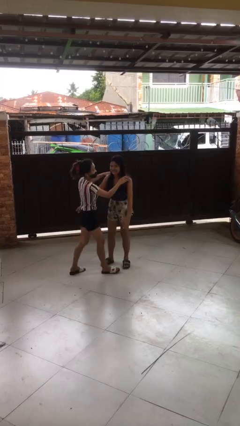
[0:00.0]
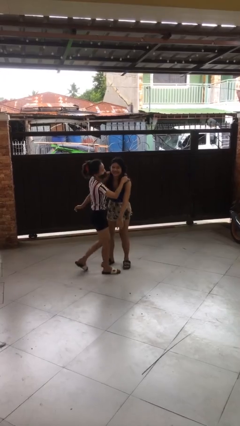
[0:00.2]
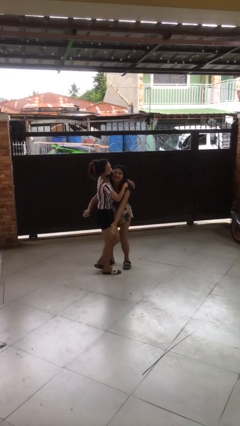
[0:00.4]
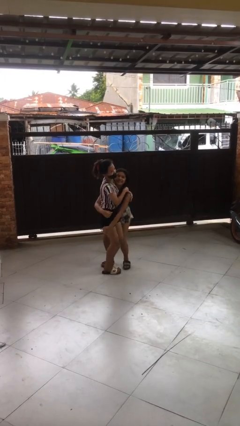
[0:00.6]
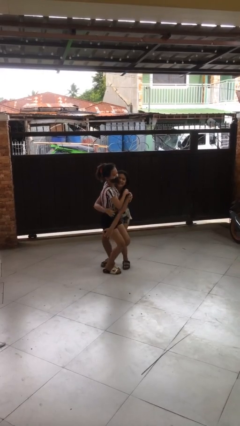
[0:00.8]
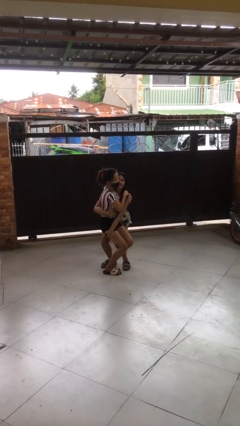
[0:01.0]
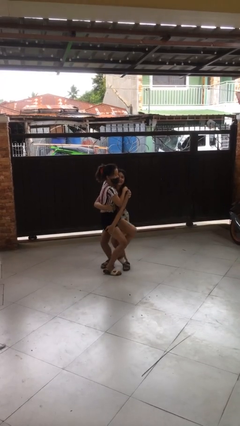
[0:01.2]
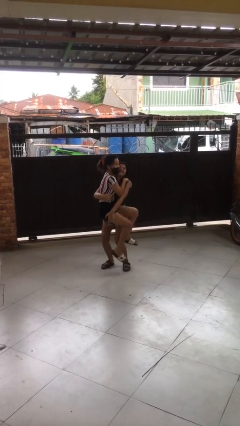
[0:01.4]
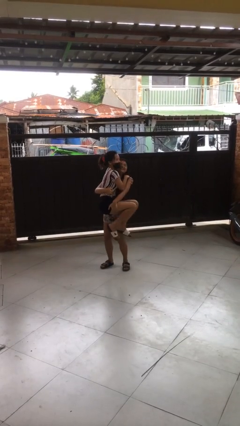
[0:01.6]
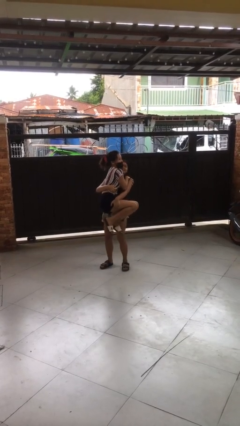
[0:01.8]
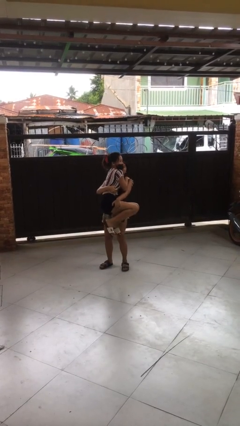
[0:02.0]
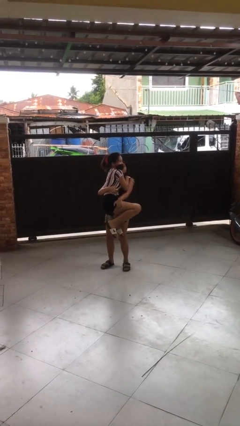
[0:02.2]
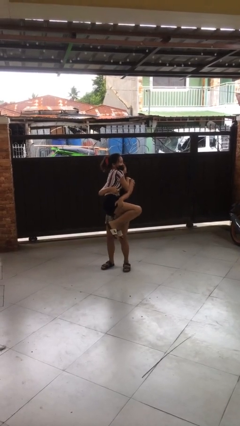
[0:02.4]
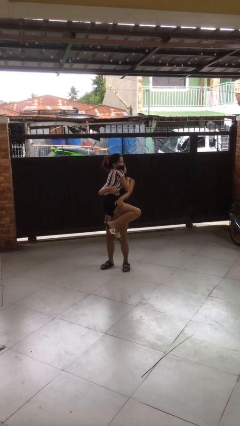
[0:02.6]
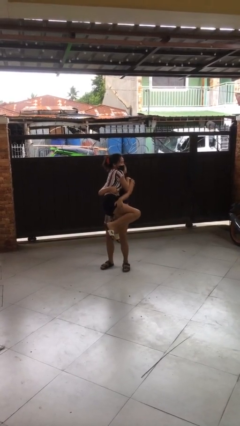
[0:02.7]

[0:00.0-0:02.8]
person picks up person

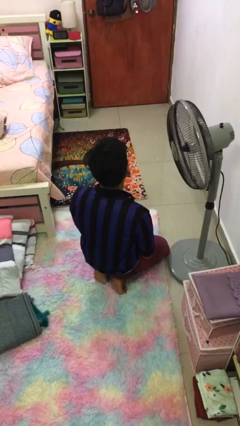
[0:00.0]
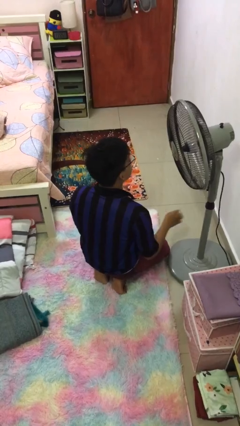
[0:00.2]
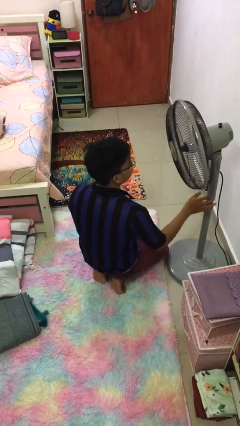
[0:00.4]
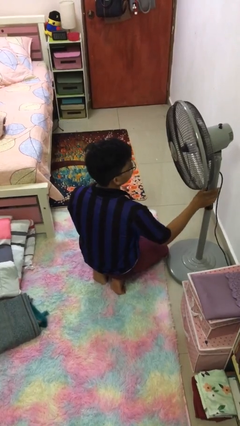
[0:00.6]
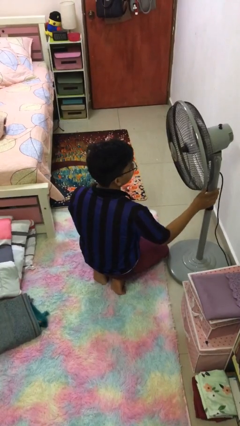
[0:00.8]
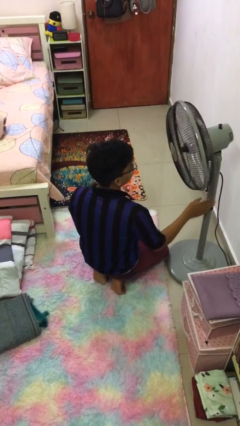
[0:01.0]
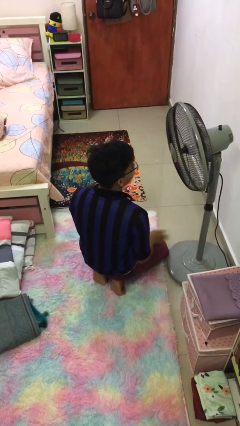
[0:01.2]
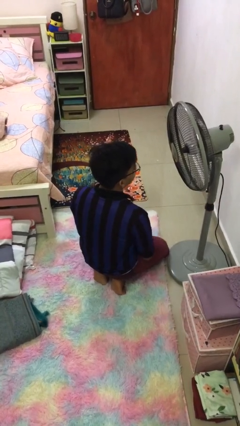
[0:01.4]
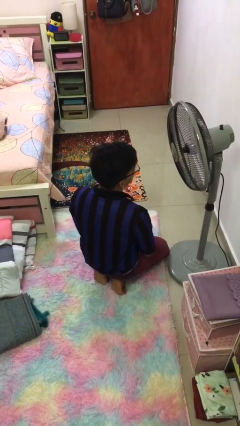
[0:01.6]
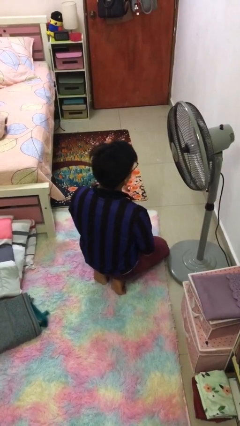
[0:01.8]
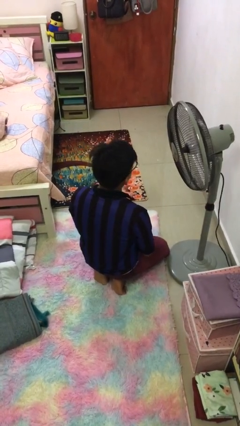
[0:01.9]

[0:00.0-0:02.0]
person turns on fan

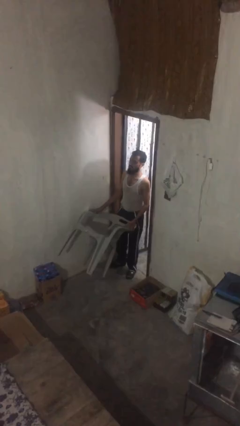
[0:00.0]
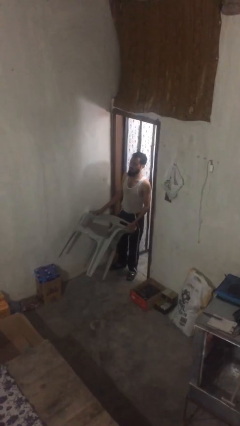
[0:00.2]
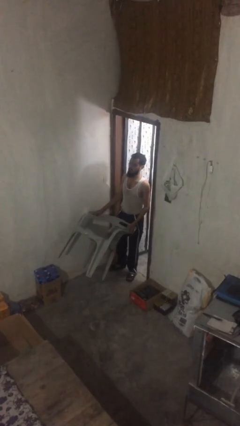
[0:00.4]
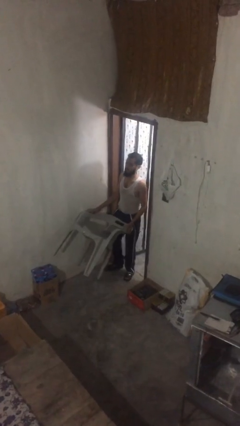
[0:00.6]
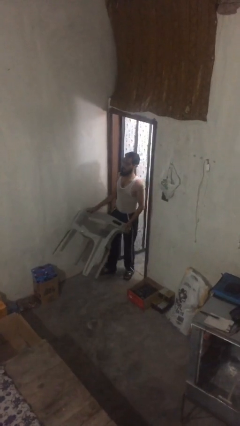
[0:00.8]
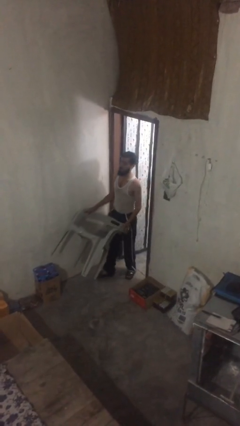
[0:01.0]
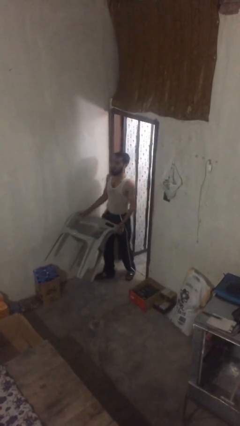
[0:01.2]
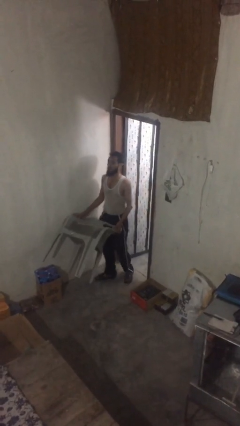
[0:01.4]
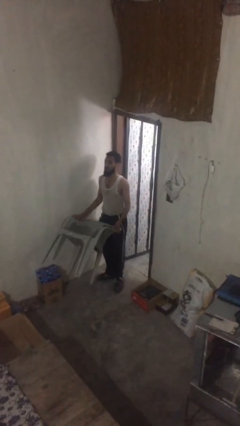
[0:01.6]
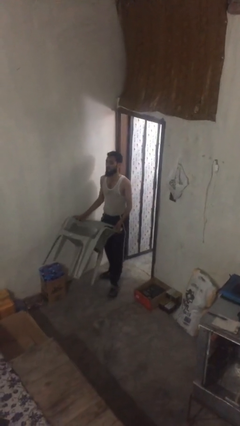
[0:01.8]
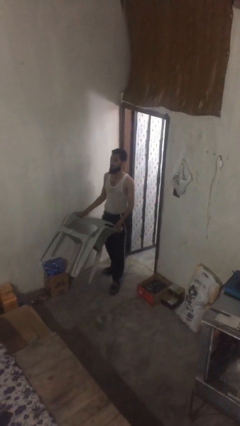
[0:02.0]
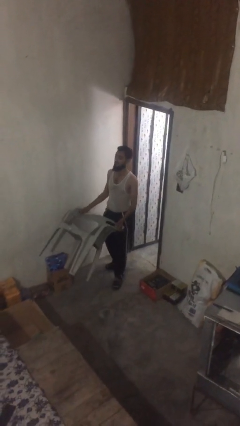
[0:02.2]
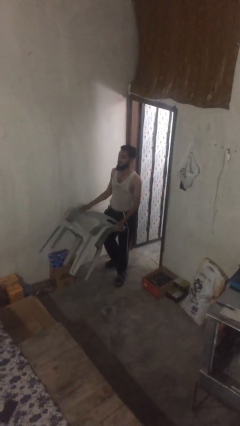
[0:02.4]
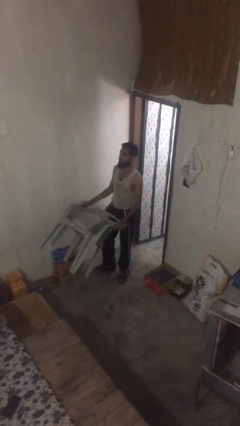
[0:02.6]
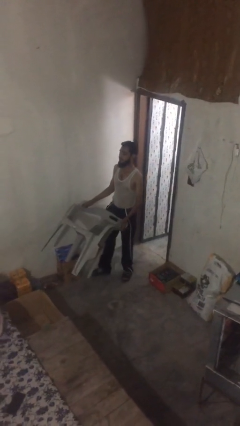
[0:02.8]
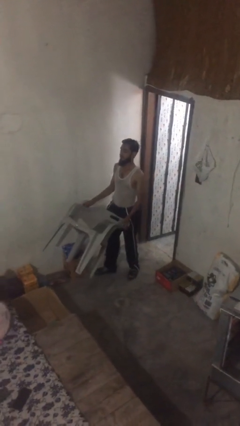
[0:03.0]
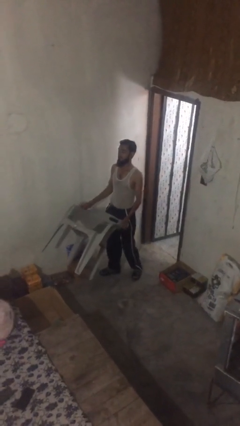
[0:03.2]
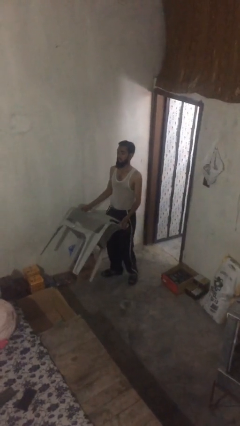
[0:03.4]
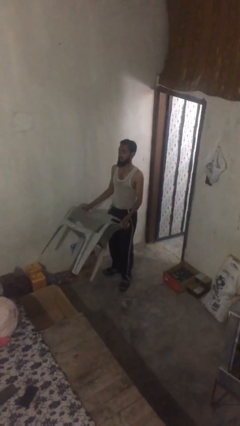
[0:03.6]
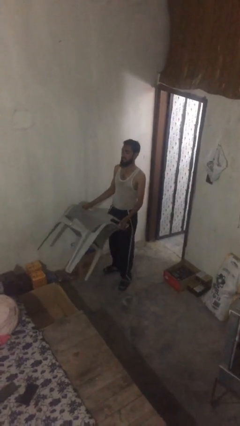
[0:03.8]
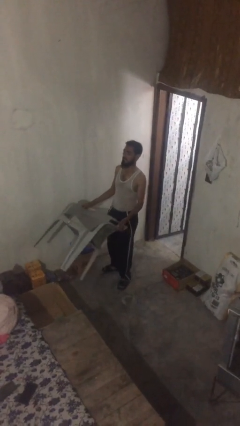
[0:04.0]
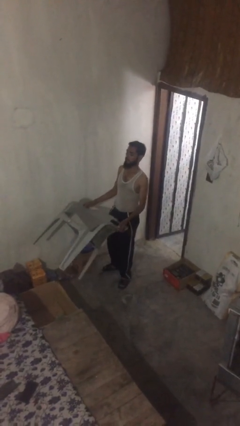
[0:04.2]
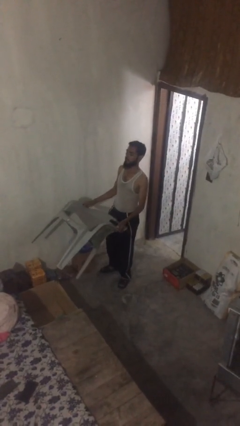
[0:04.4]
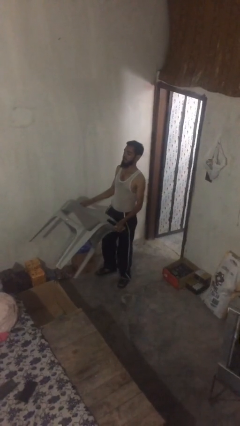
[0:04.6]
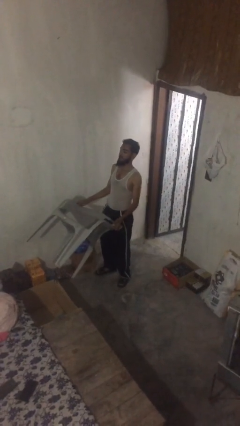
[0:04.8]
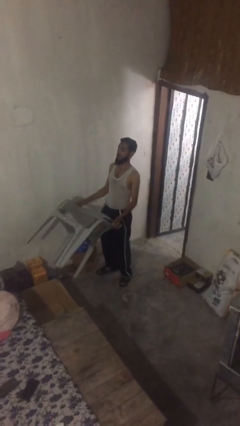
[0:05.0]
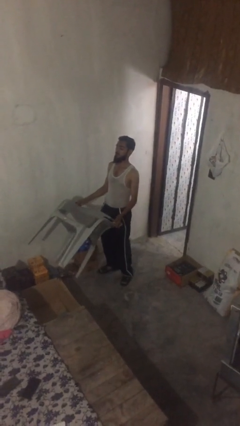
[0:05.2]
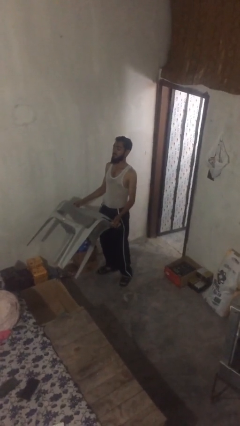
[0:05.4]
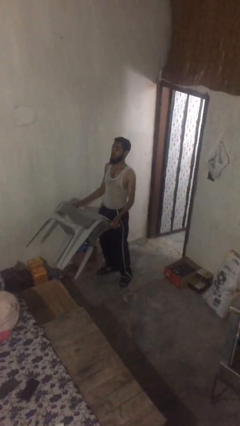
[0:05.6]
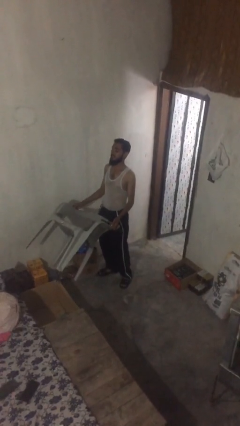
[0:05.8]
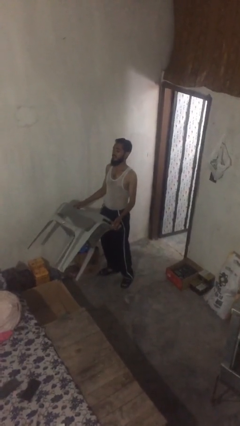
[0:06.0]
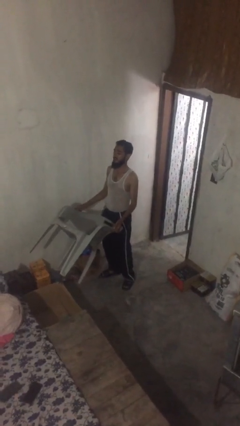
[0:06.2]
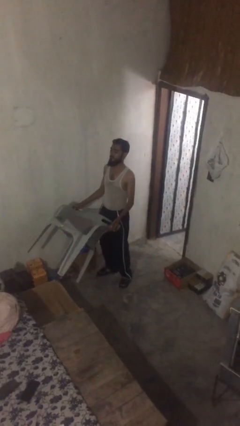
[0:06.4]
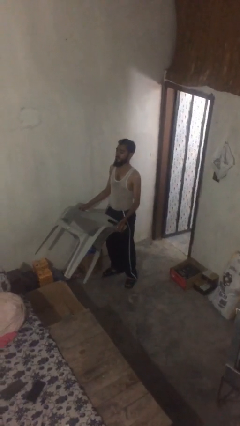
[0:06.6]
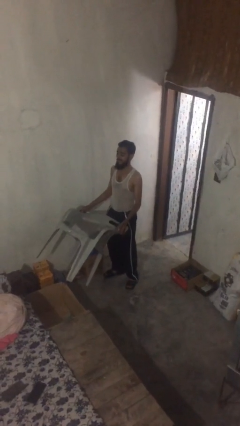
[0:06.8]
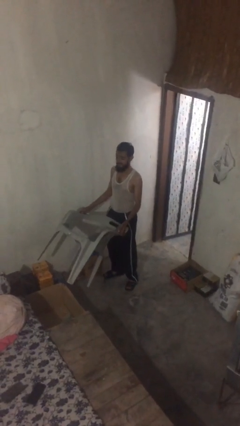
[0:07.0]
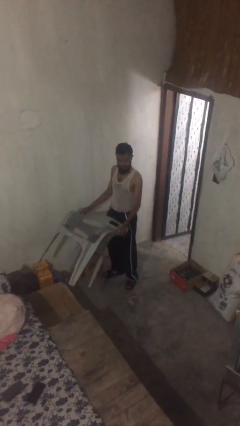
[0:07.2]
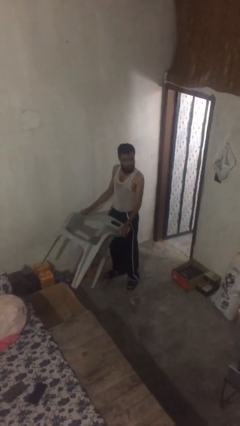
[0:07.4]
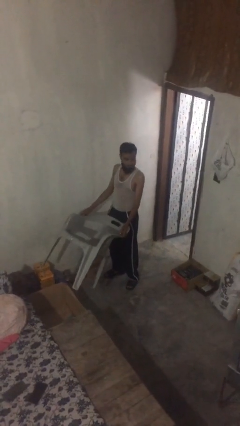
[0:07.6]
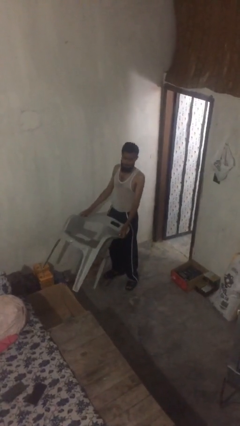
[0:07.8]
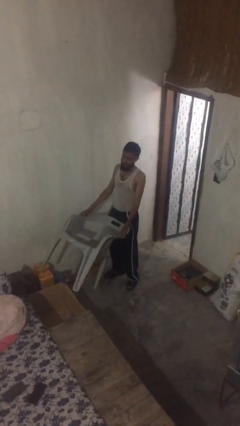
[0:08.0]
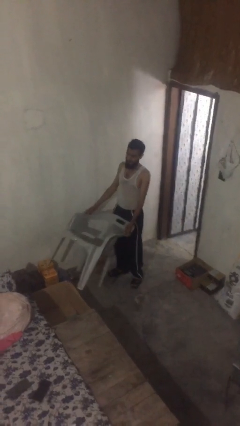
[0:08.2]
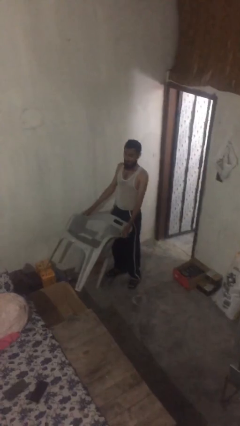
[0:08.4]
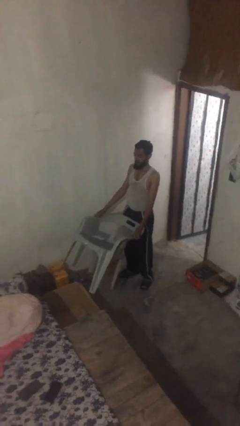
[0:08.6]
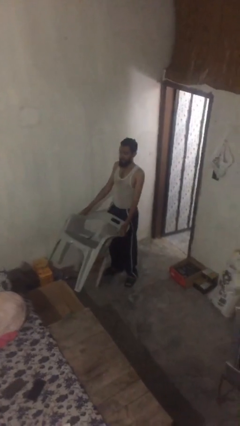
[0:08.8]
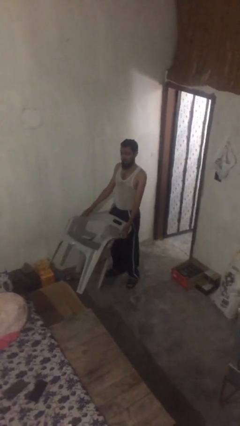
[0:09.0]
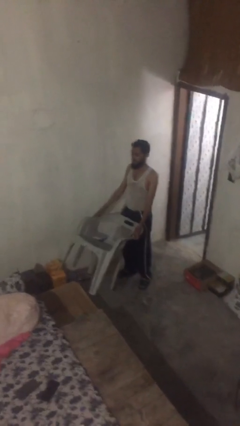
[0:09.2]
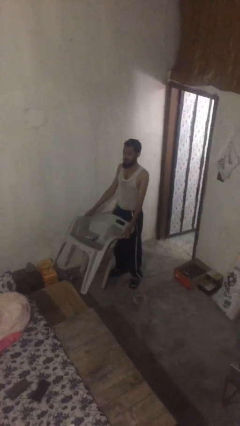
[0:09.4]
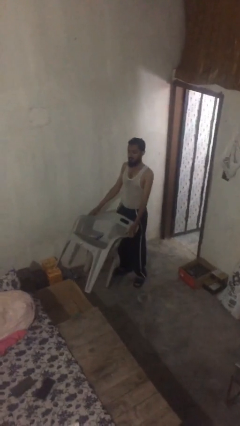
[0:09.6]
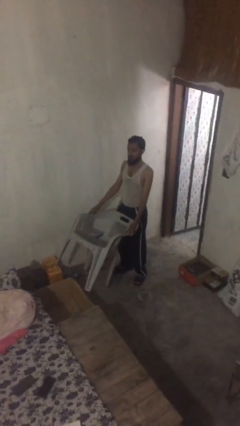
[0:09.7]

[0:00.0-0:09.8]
person carries heavy object

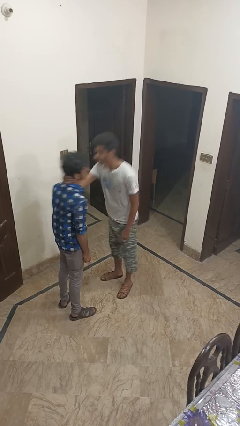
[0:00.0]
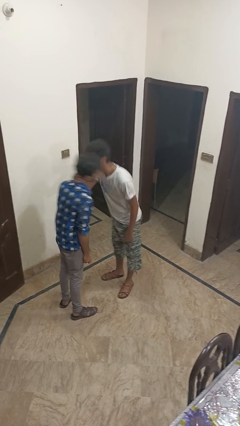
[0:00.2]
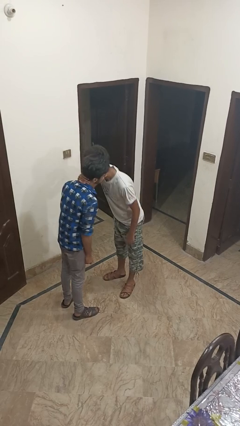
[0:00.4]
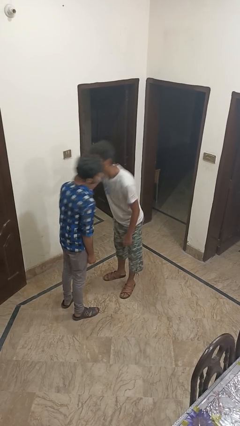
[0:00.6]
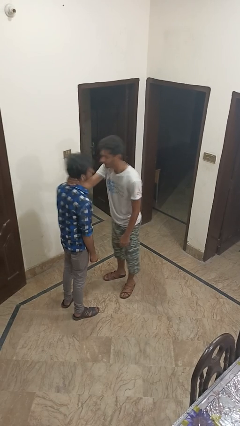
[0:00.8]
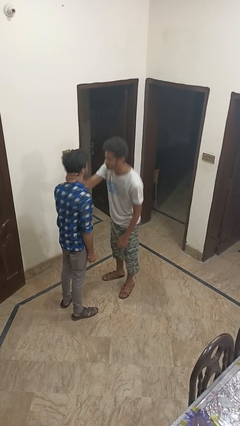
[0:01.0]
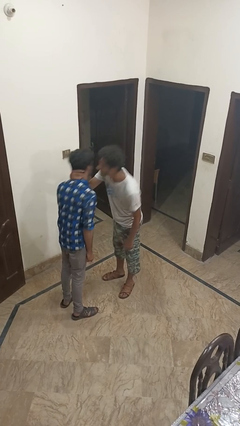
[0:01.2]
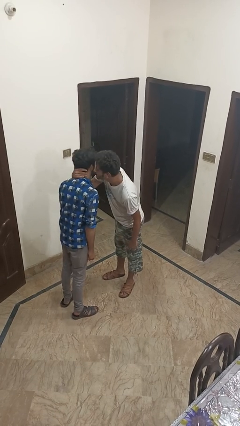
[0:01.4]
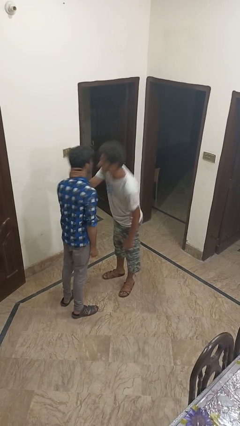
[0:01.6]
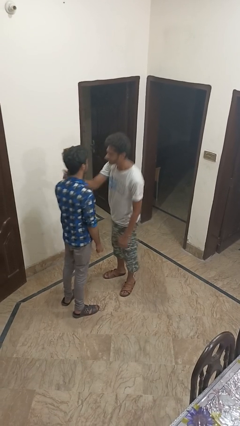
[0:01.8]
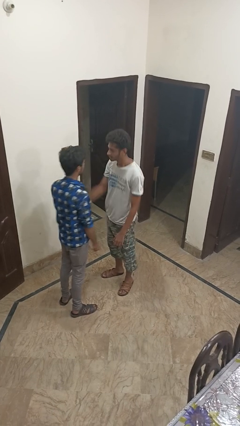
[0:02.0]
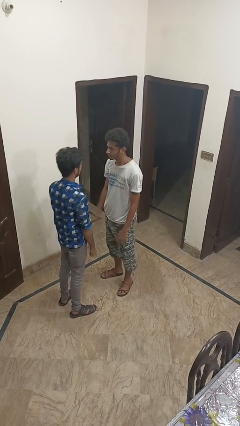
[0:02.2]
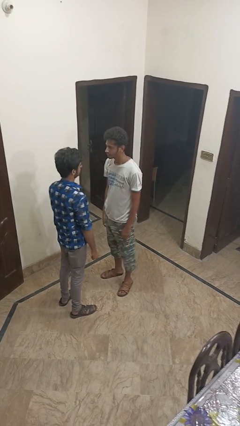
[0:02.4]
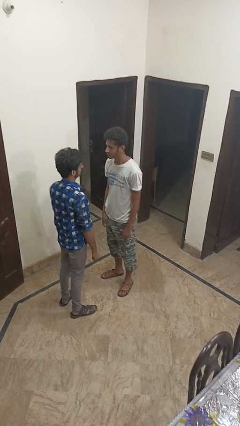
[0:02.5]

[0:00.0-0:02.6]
person kisses cheek of person

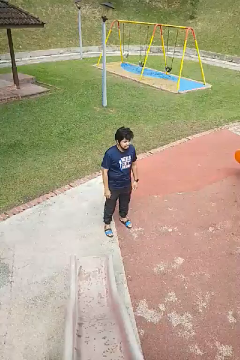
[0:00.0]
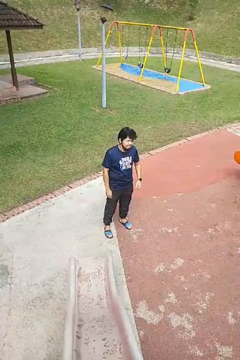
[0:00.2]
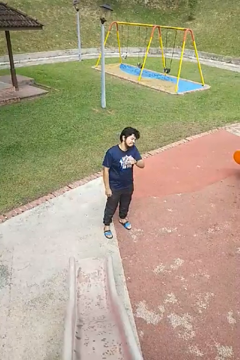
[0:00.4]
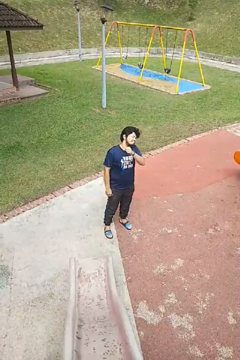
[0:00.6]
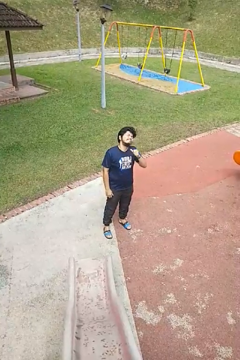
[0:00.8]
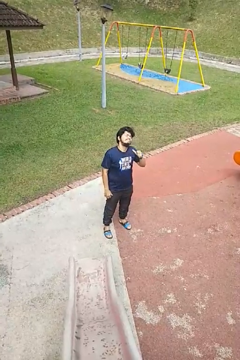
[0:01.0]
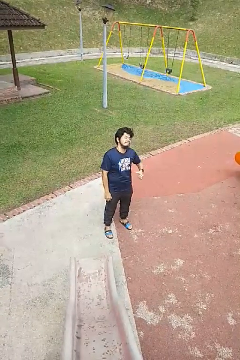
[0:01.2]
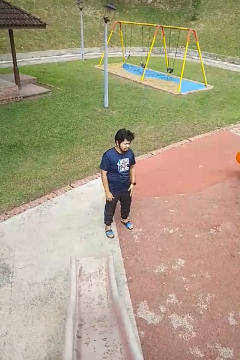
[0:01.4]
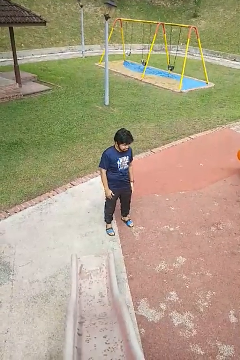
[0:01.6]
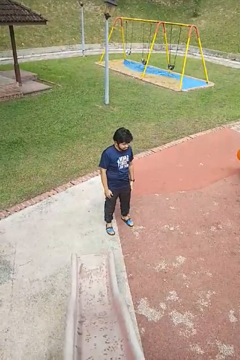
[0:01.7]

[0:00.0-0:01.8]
person gestures cut
